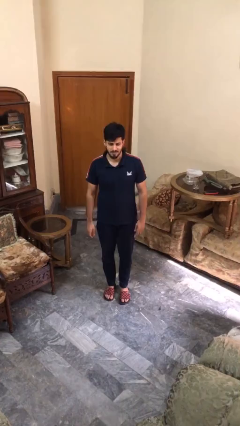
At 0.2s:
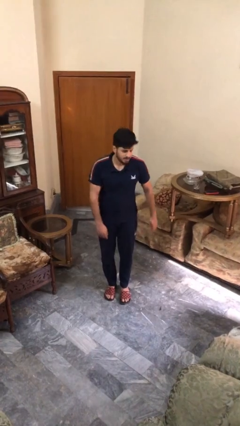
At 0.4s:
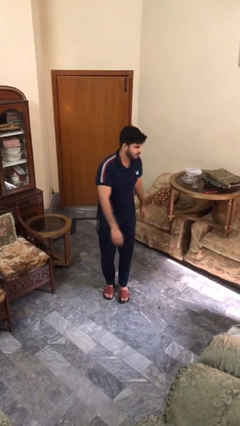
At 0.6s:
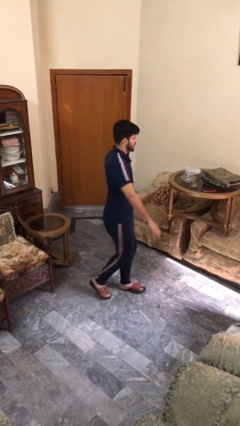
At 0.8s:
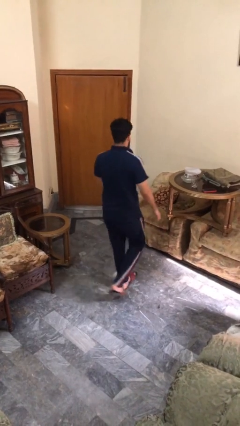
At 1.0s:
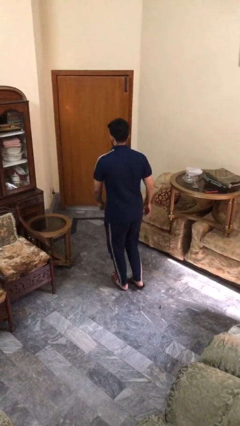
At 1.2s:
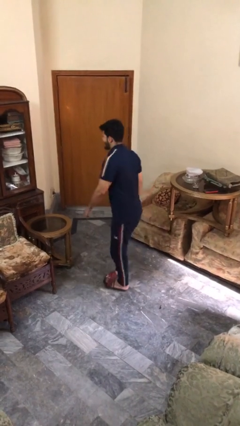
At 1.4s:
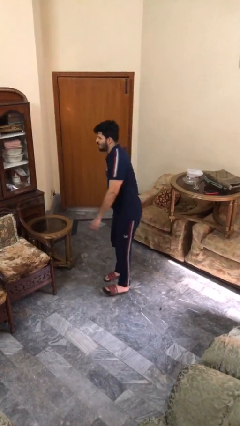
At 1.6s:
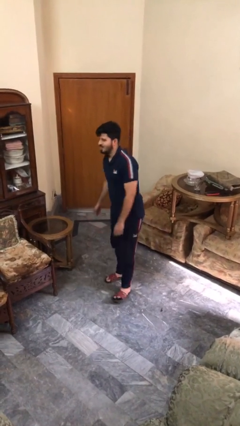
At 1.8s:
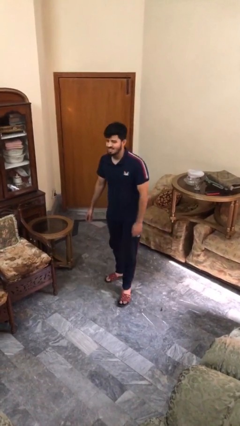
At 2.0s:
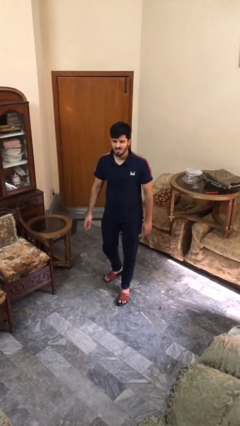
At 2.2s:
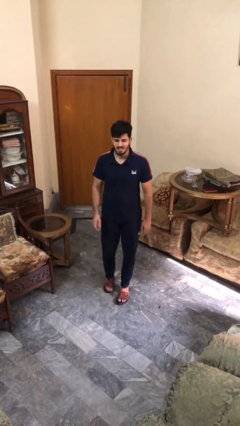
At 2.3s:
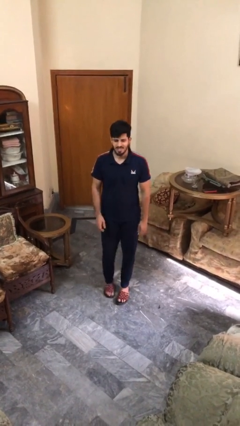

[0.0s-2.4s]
person twirls

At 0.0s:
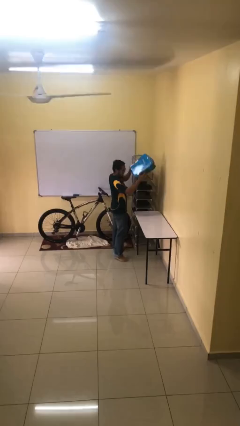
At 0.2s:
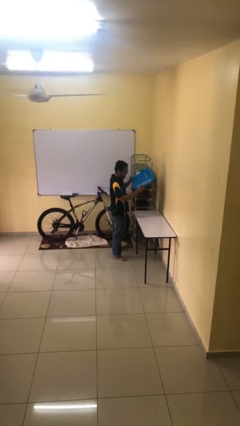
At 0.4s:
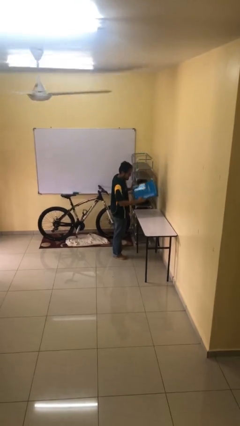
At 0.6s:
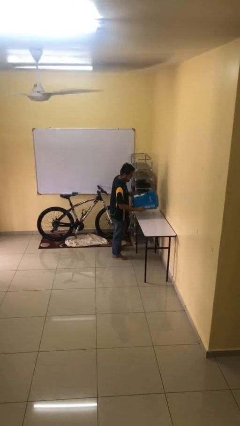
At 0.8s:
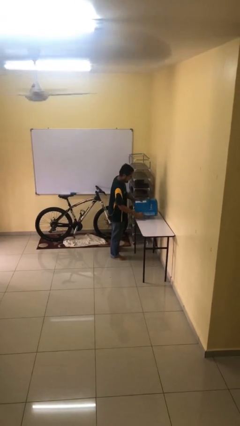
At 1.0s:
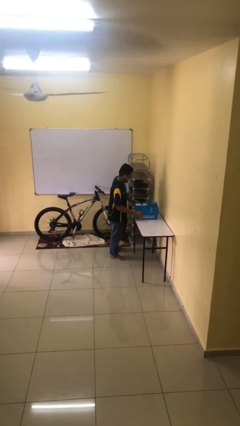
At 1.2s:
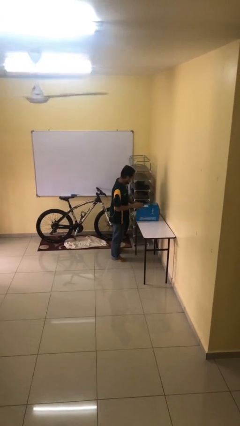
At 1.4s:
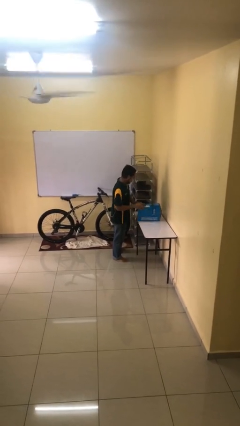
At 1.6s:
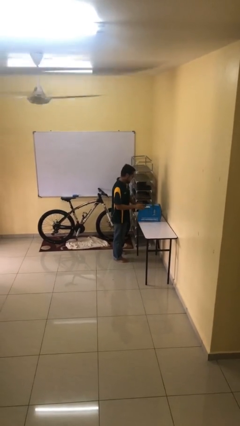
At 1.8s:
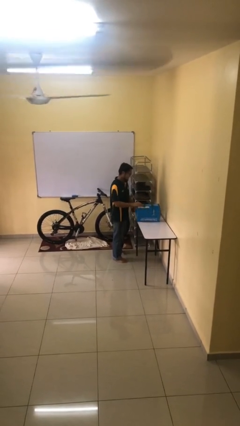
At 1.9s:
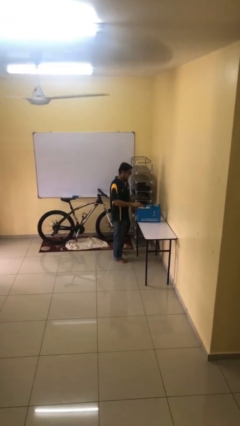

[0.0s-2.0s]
person puts down object on table

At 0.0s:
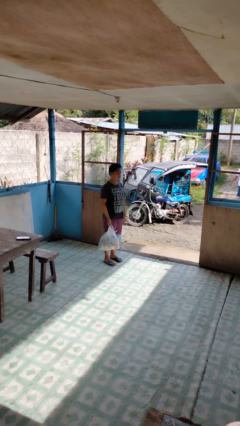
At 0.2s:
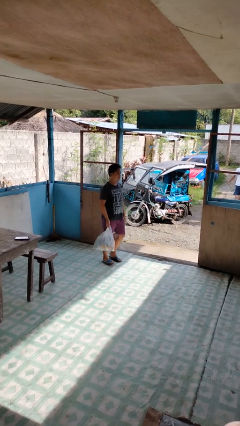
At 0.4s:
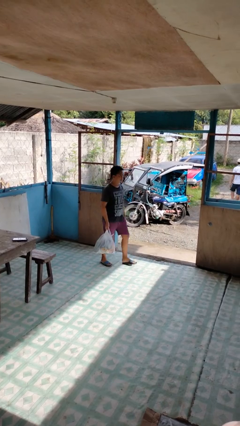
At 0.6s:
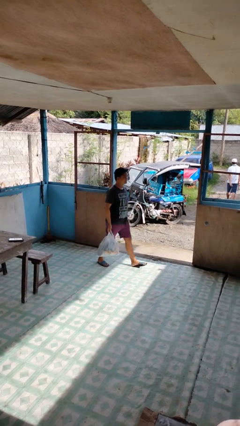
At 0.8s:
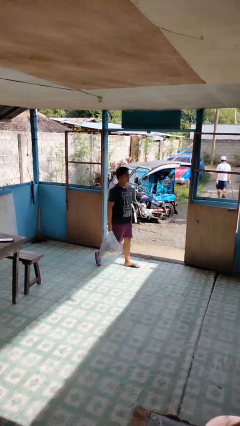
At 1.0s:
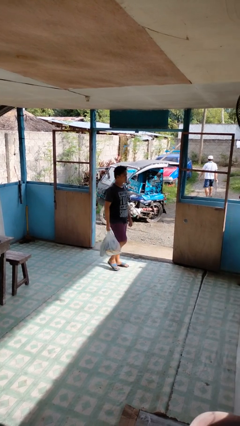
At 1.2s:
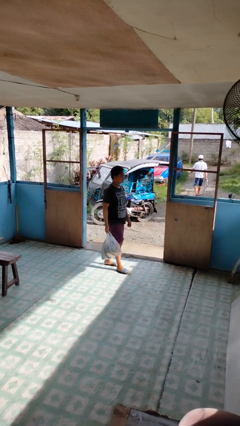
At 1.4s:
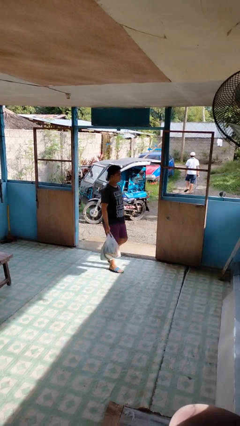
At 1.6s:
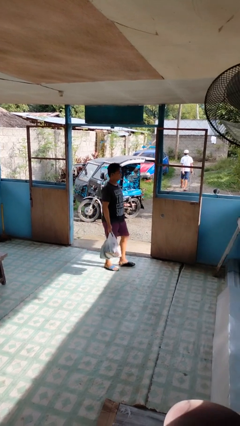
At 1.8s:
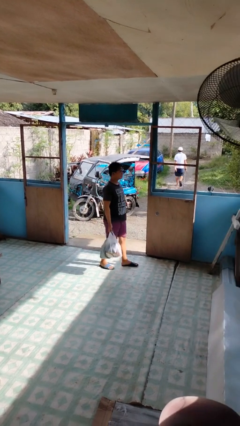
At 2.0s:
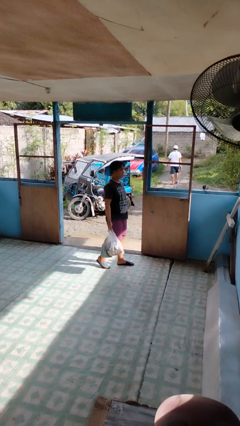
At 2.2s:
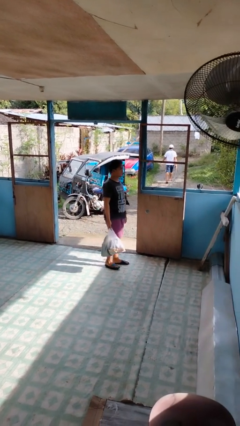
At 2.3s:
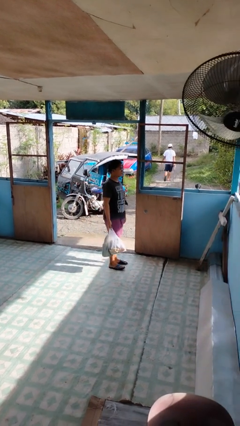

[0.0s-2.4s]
person carries groceries

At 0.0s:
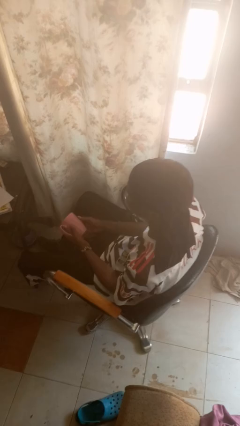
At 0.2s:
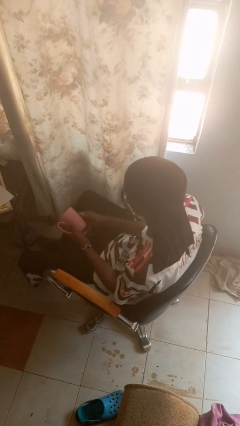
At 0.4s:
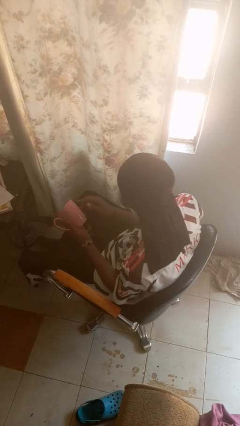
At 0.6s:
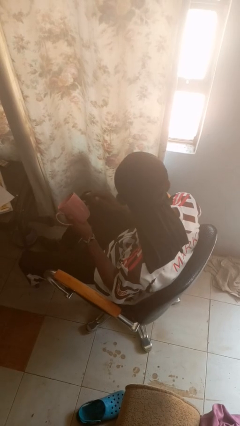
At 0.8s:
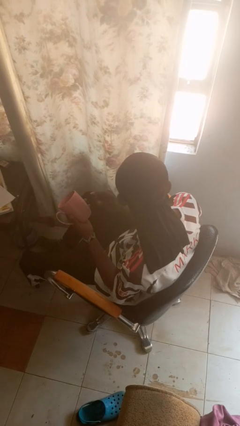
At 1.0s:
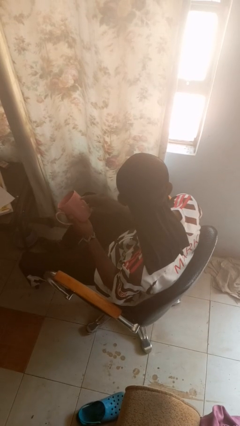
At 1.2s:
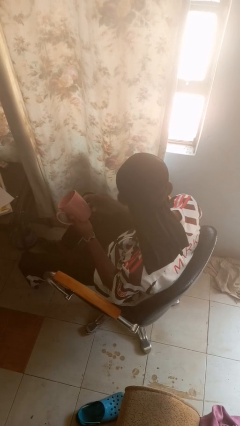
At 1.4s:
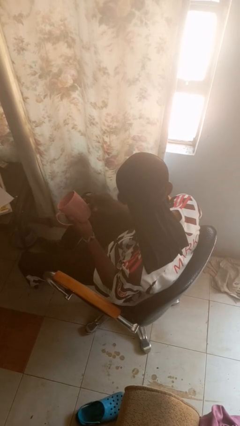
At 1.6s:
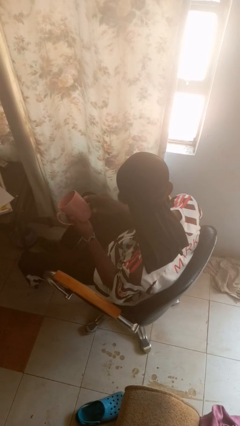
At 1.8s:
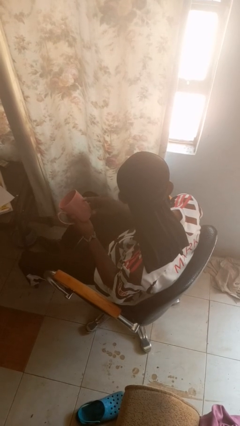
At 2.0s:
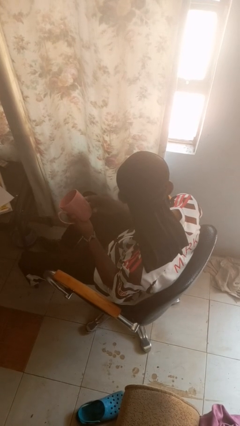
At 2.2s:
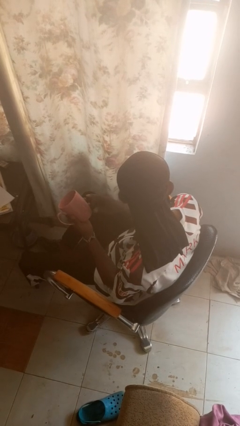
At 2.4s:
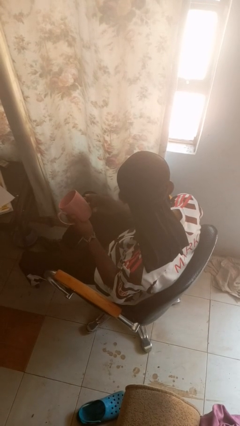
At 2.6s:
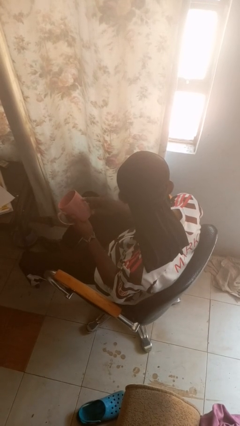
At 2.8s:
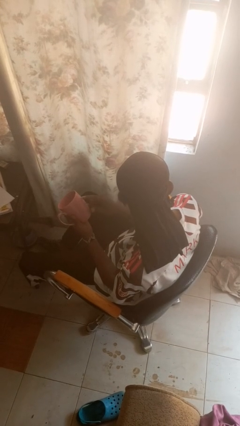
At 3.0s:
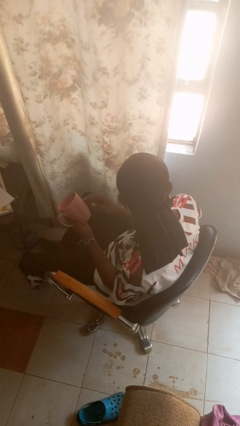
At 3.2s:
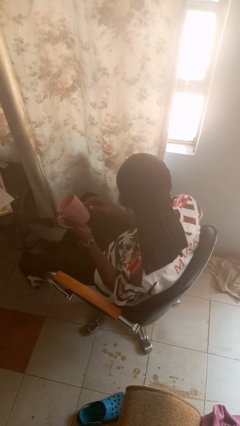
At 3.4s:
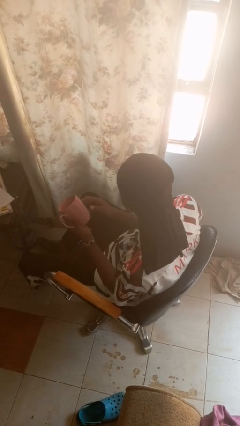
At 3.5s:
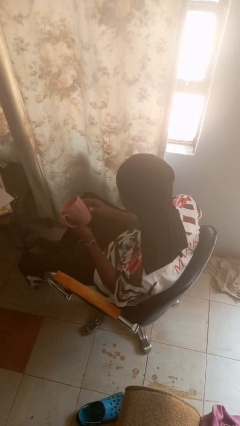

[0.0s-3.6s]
person taps object with finger

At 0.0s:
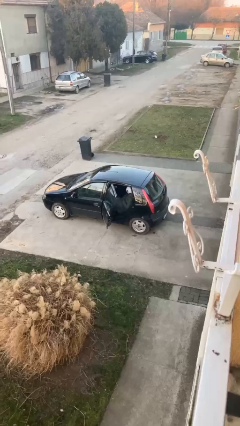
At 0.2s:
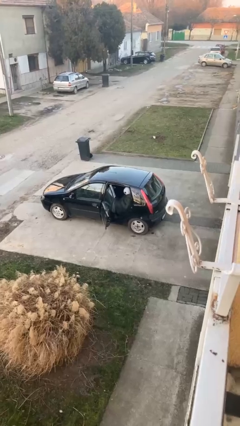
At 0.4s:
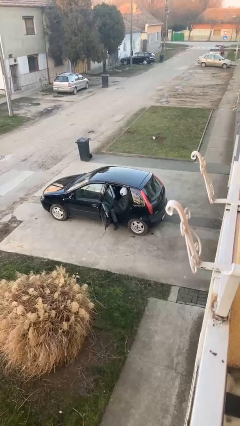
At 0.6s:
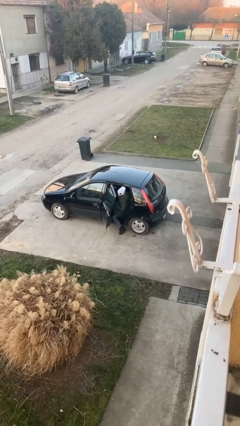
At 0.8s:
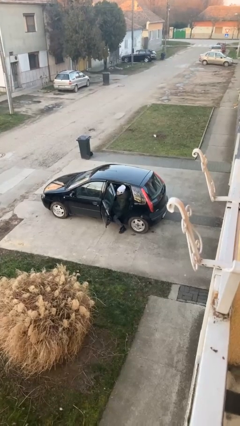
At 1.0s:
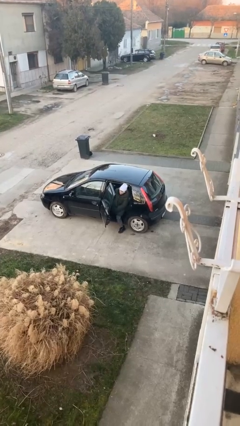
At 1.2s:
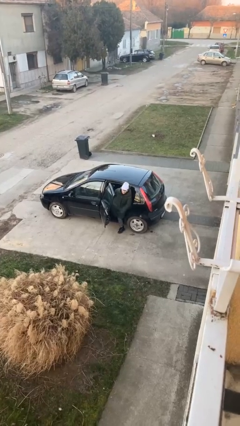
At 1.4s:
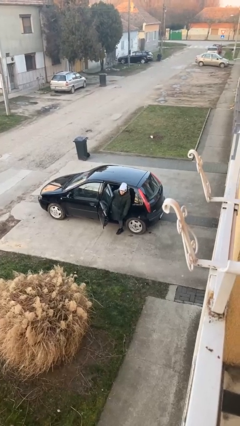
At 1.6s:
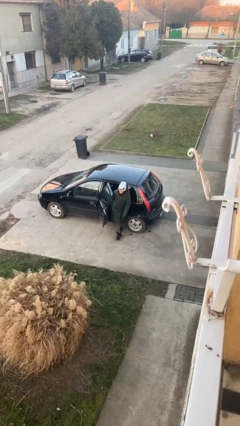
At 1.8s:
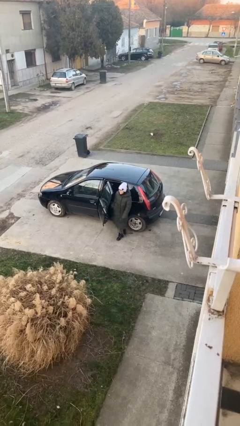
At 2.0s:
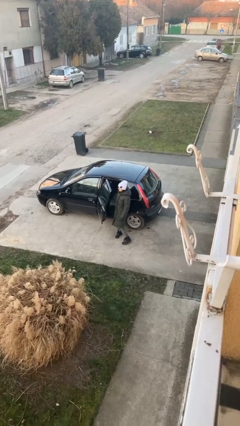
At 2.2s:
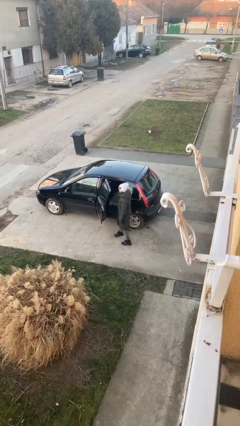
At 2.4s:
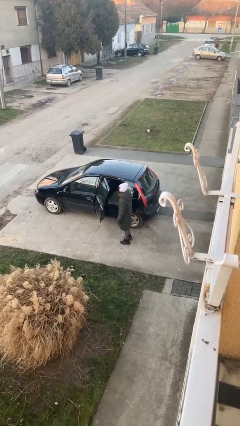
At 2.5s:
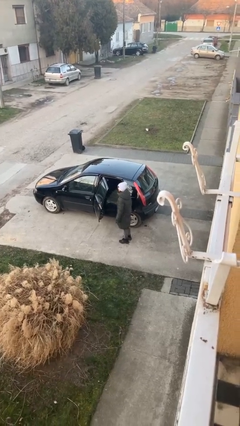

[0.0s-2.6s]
person exits car

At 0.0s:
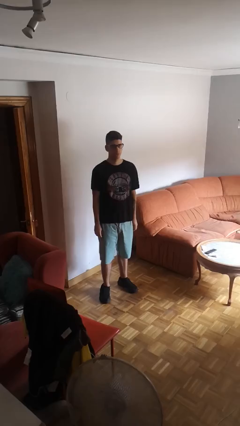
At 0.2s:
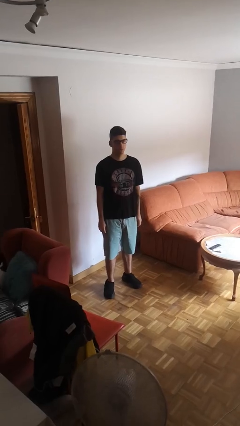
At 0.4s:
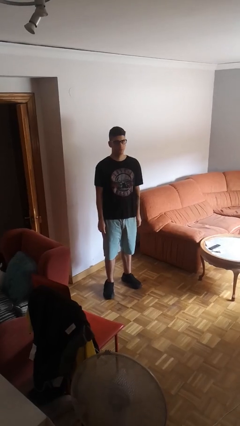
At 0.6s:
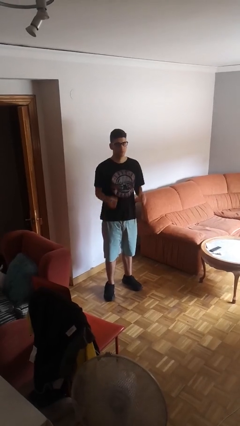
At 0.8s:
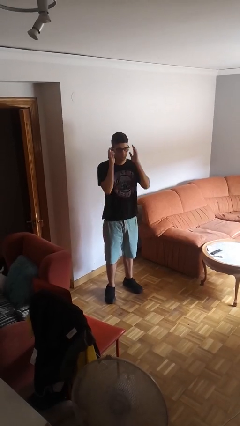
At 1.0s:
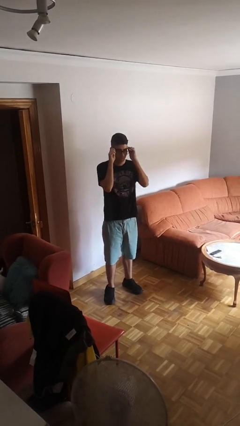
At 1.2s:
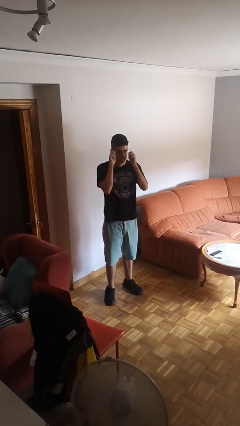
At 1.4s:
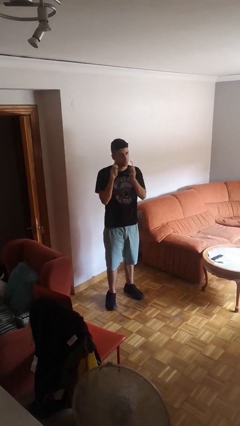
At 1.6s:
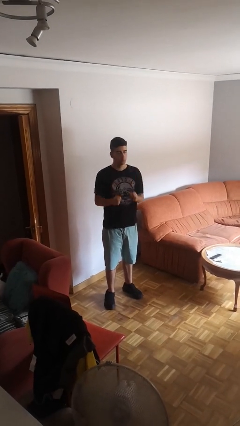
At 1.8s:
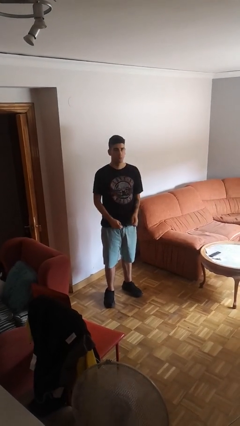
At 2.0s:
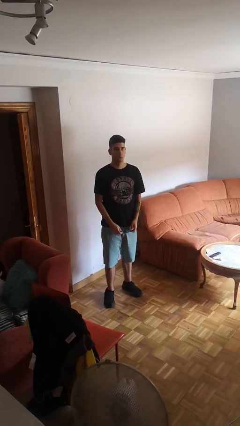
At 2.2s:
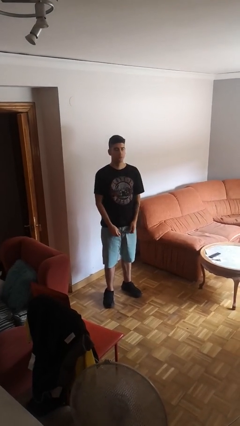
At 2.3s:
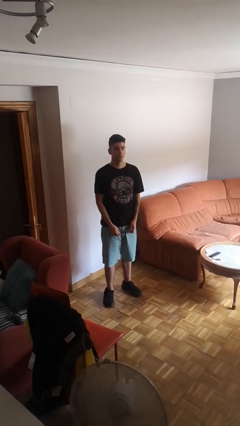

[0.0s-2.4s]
person takes off glasses

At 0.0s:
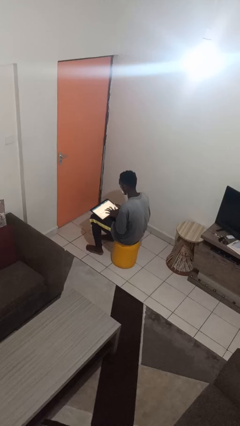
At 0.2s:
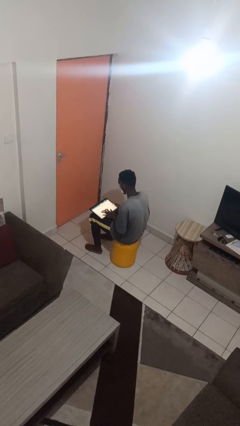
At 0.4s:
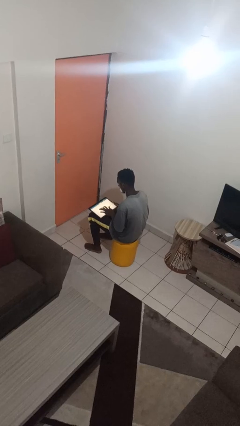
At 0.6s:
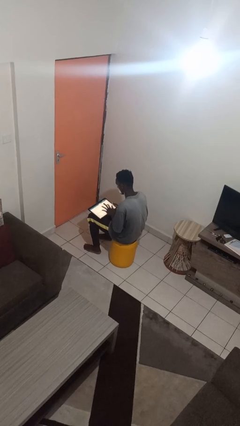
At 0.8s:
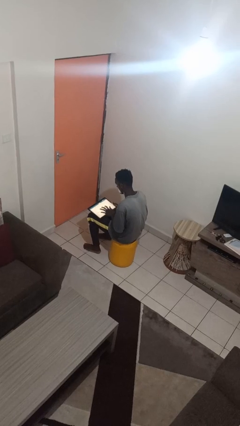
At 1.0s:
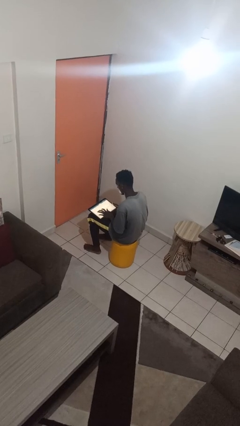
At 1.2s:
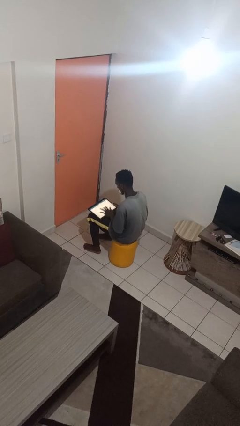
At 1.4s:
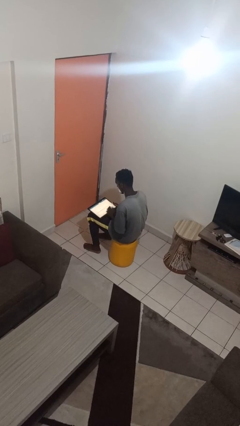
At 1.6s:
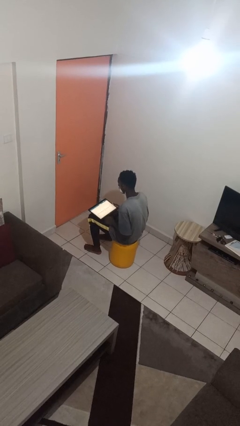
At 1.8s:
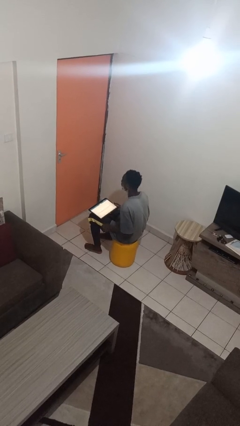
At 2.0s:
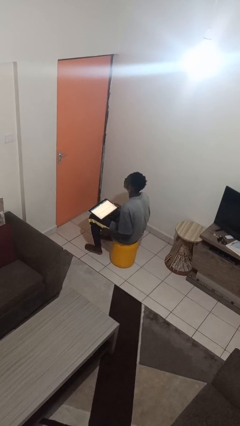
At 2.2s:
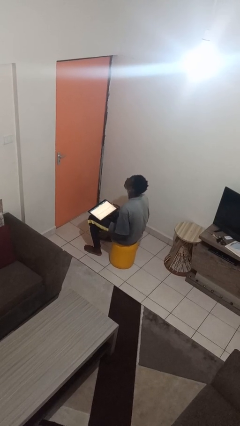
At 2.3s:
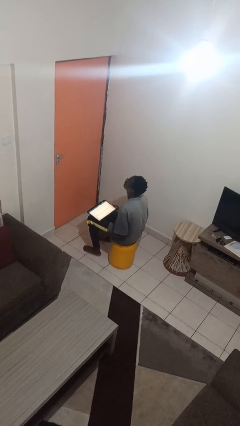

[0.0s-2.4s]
person interacts with tablet
